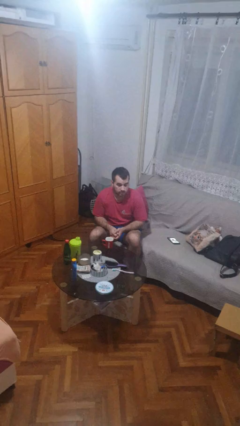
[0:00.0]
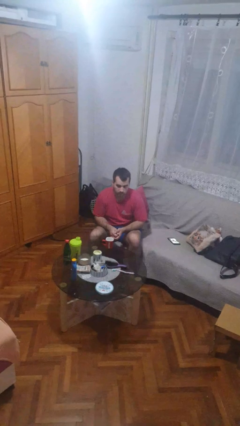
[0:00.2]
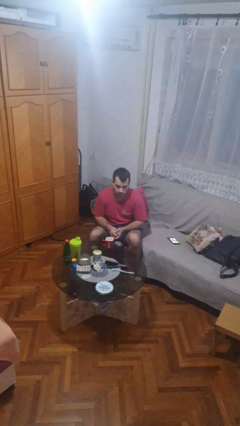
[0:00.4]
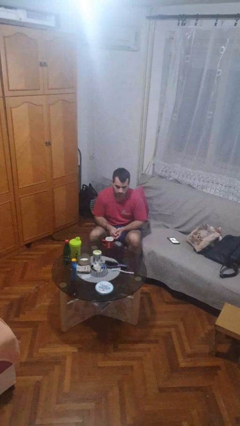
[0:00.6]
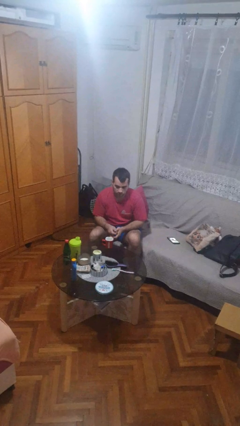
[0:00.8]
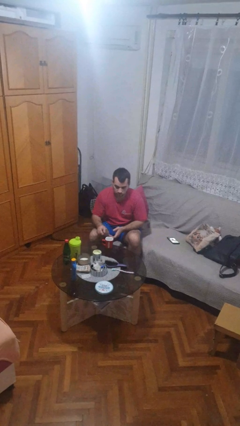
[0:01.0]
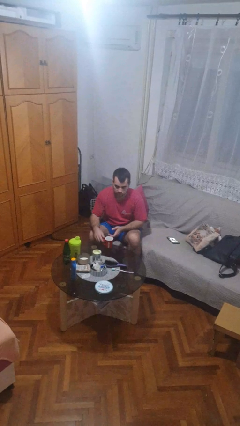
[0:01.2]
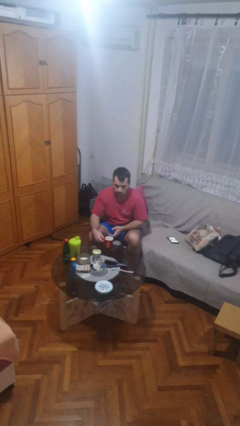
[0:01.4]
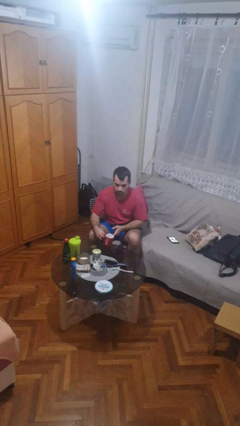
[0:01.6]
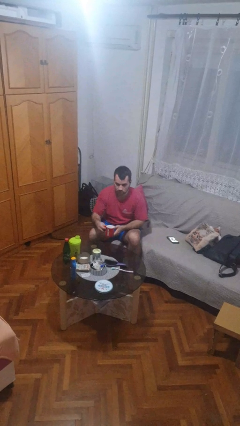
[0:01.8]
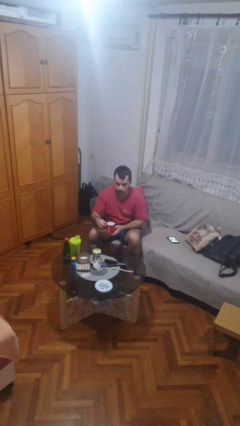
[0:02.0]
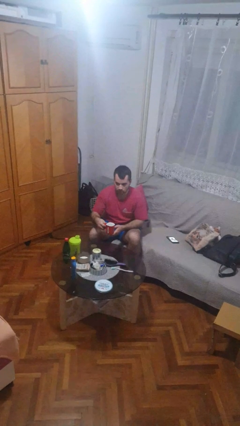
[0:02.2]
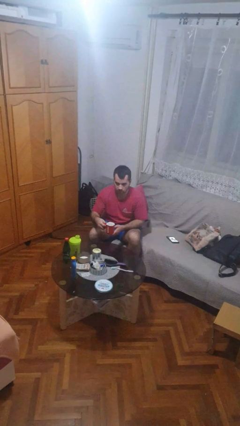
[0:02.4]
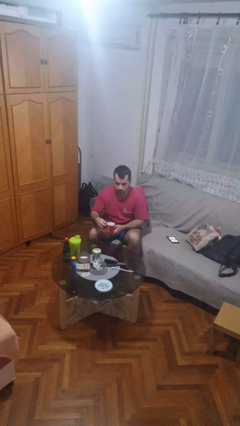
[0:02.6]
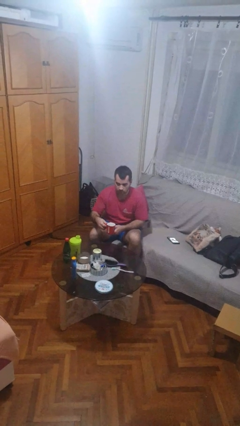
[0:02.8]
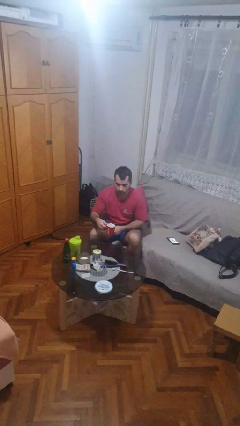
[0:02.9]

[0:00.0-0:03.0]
person picks up object from table

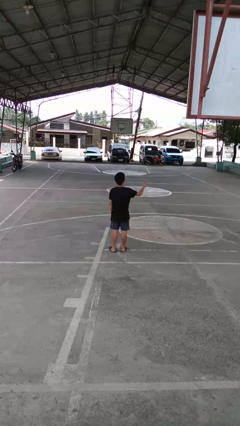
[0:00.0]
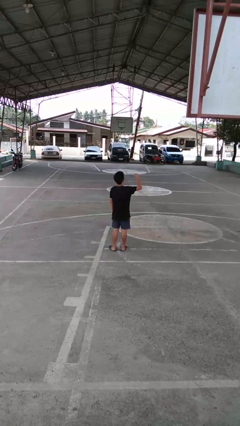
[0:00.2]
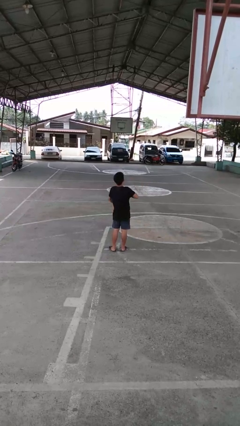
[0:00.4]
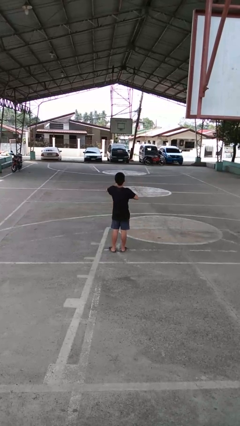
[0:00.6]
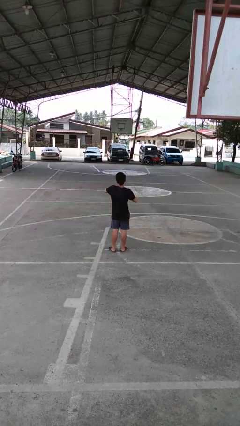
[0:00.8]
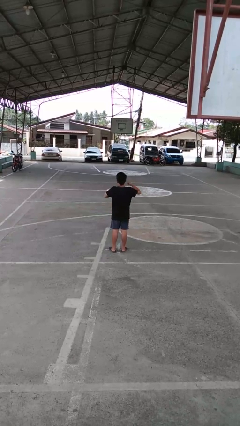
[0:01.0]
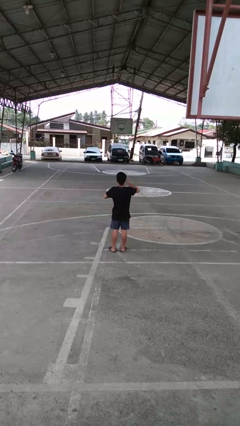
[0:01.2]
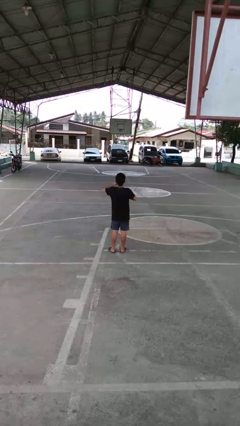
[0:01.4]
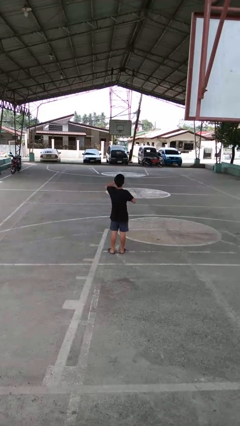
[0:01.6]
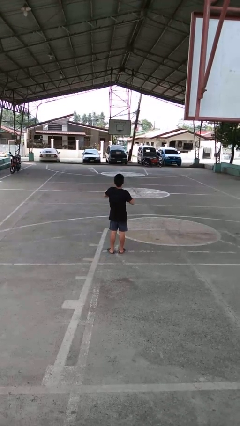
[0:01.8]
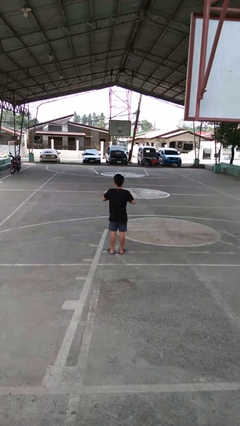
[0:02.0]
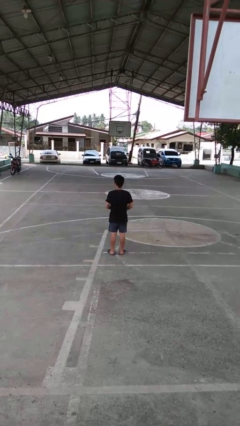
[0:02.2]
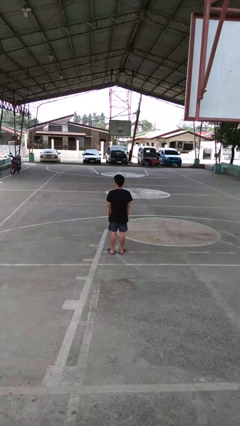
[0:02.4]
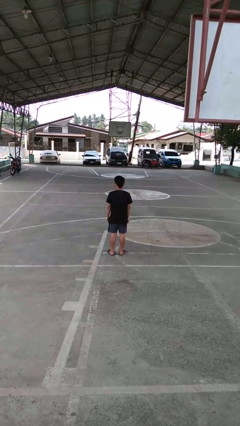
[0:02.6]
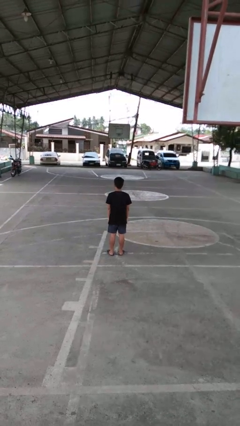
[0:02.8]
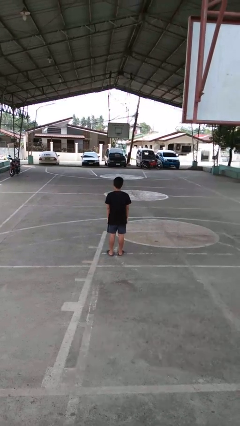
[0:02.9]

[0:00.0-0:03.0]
person drums on chest

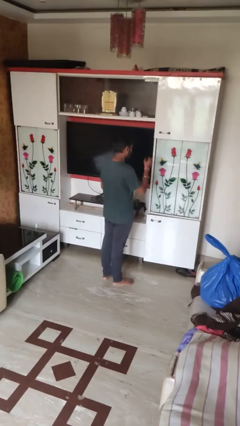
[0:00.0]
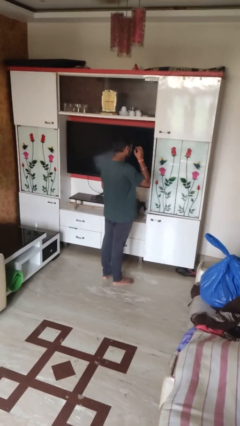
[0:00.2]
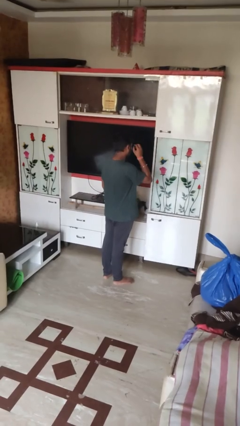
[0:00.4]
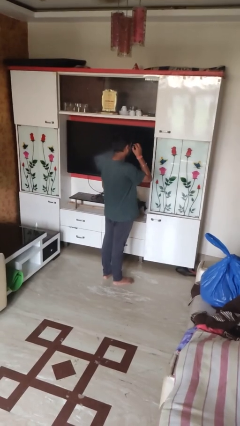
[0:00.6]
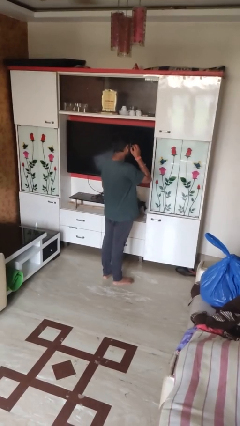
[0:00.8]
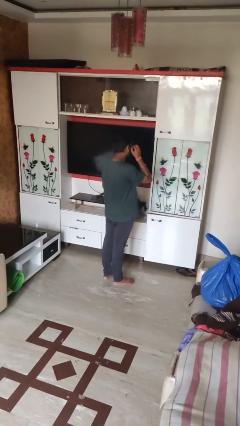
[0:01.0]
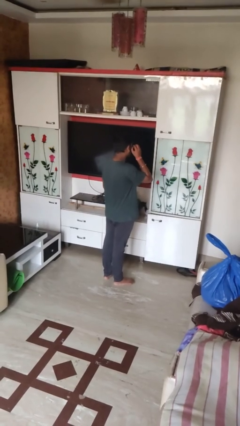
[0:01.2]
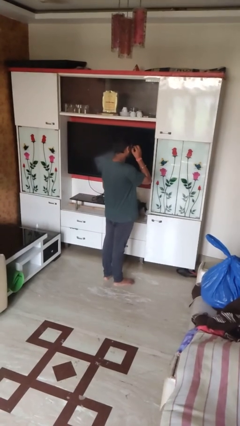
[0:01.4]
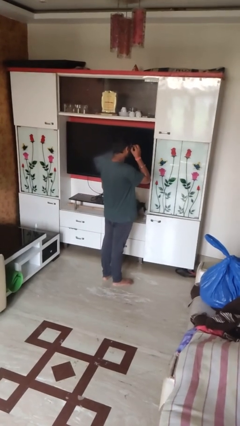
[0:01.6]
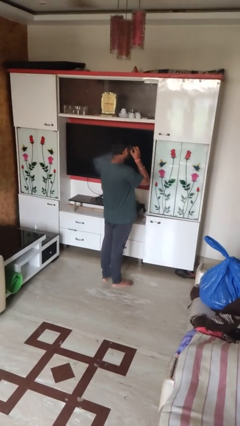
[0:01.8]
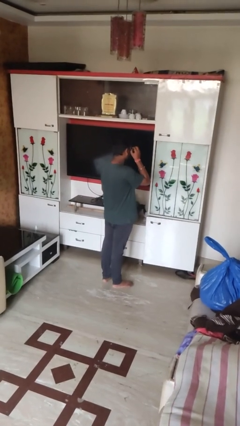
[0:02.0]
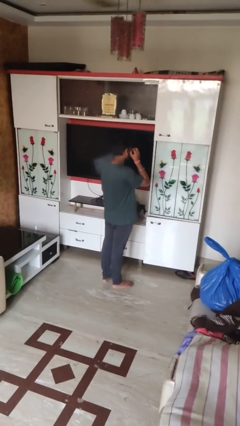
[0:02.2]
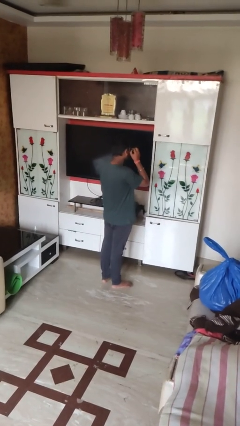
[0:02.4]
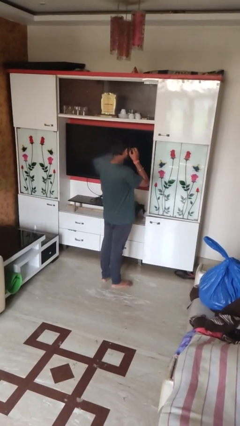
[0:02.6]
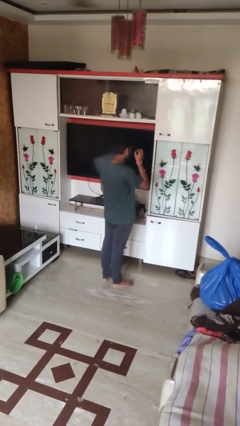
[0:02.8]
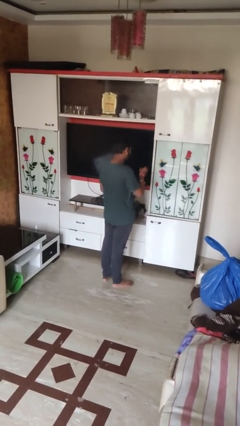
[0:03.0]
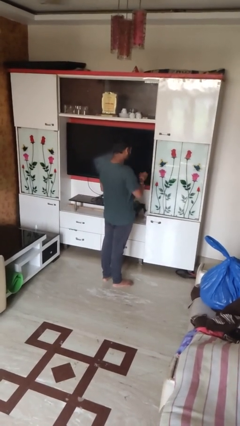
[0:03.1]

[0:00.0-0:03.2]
person applies eye makeup

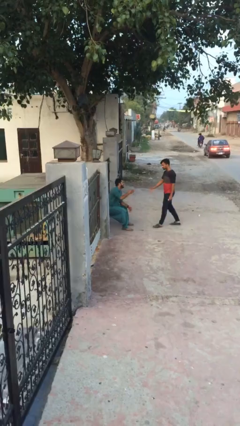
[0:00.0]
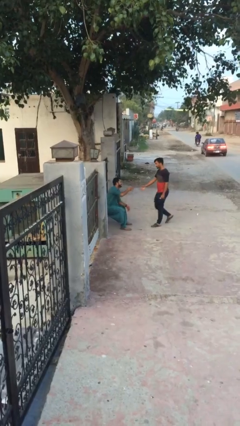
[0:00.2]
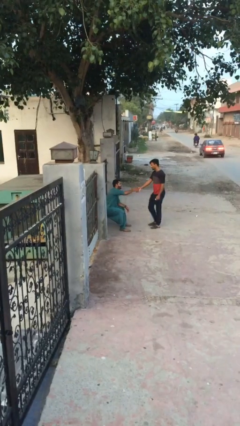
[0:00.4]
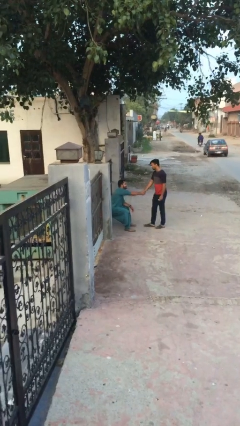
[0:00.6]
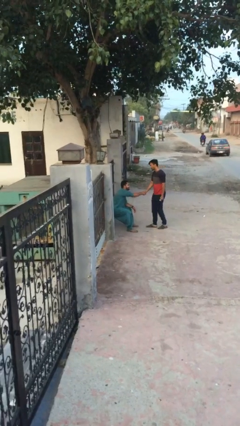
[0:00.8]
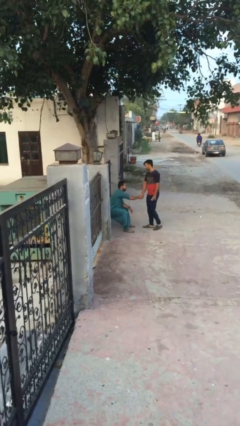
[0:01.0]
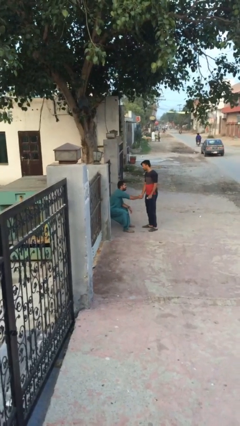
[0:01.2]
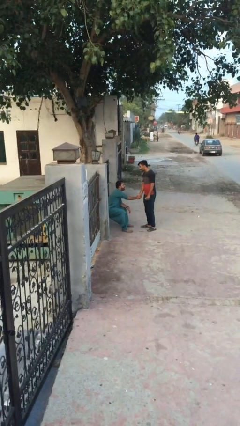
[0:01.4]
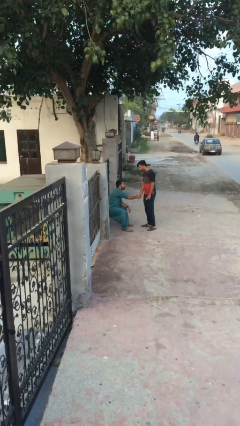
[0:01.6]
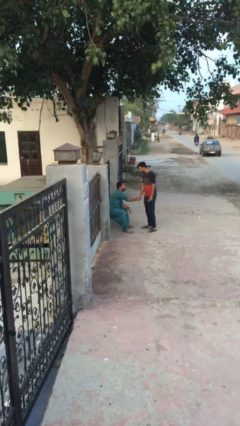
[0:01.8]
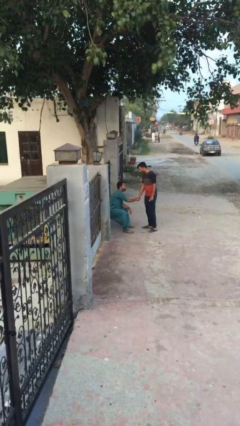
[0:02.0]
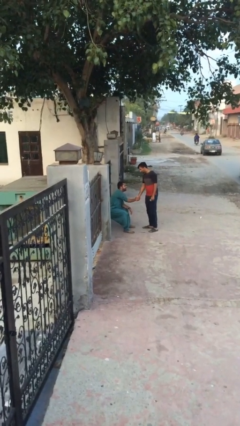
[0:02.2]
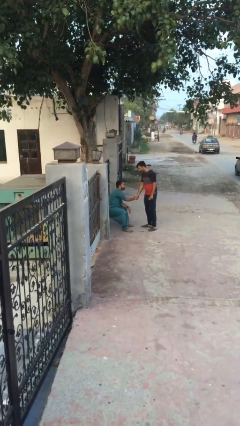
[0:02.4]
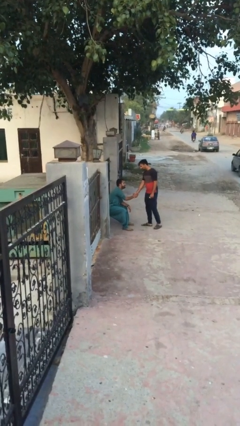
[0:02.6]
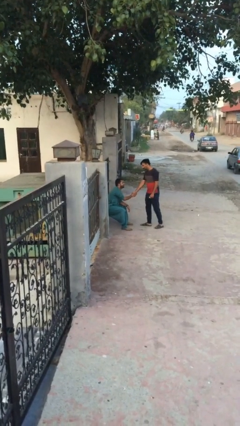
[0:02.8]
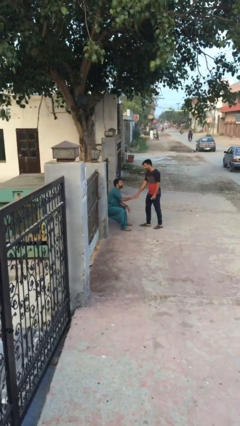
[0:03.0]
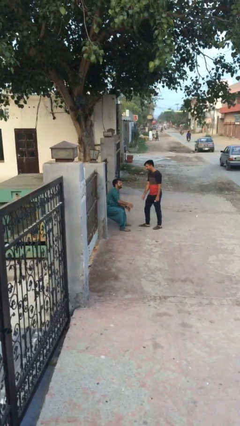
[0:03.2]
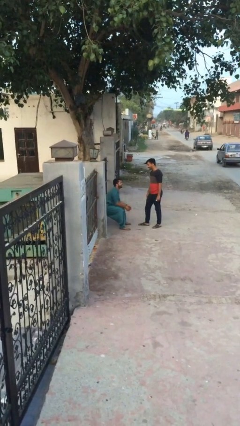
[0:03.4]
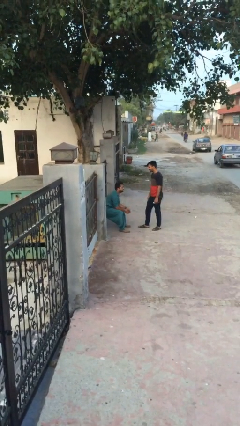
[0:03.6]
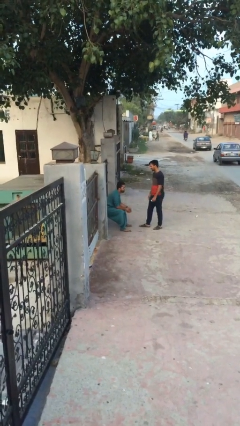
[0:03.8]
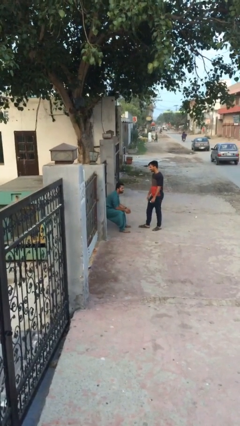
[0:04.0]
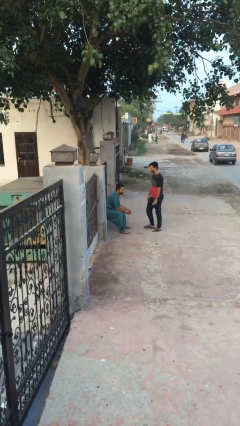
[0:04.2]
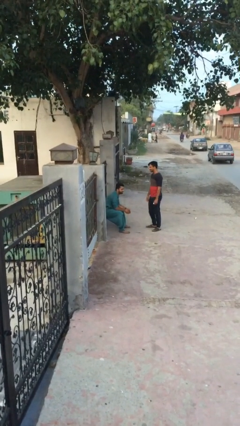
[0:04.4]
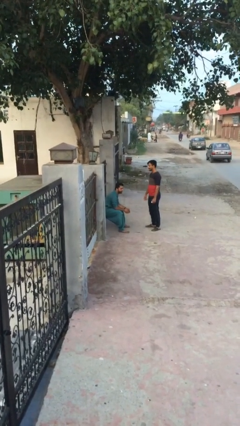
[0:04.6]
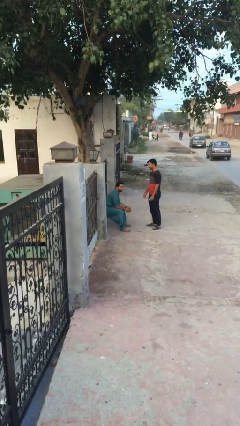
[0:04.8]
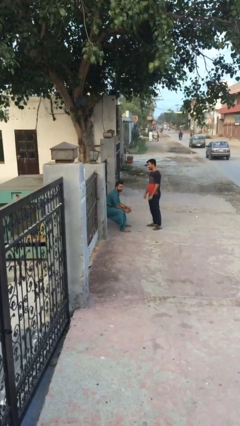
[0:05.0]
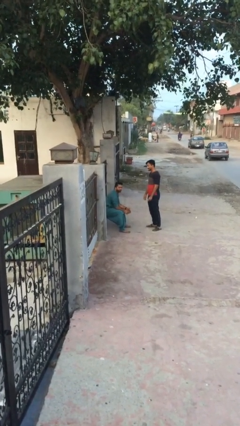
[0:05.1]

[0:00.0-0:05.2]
person shakes hand

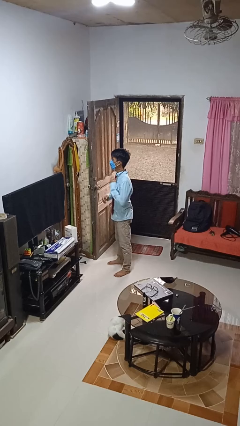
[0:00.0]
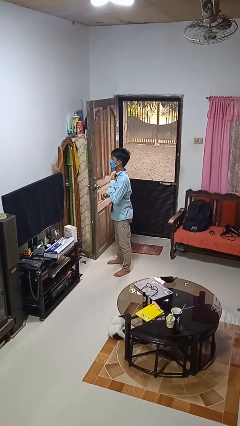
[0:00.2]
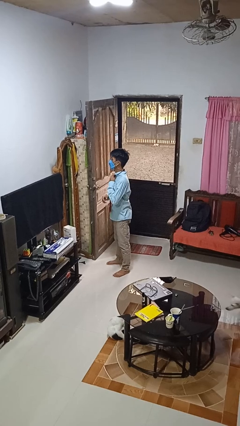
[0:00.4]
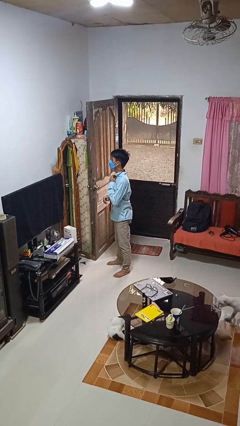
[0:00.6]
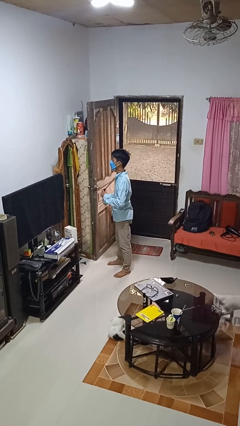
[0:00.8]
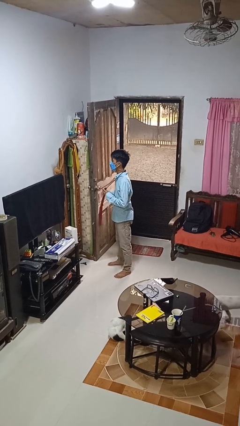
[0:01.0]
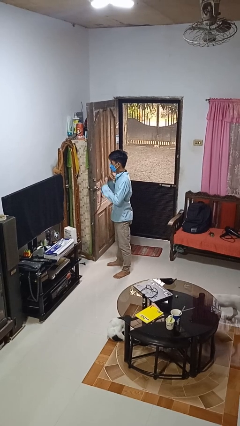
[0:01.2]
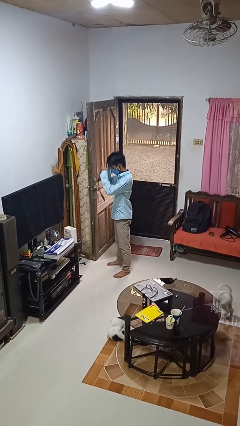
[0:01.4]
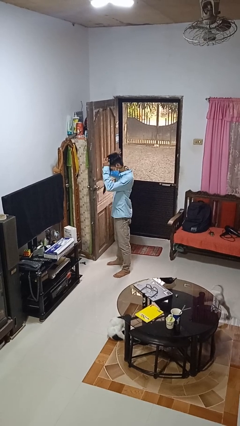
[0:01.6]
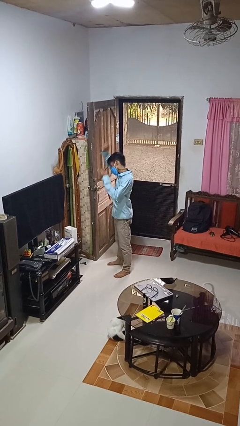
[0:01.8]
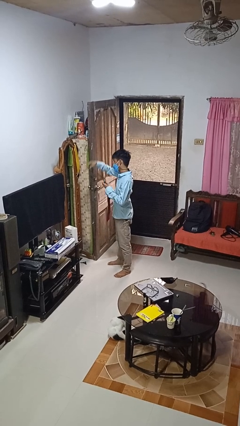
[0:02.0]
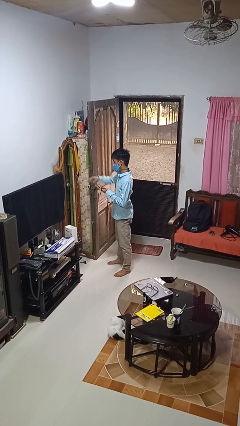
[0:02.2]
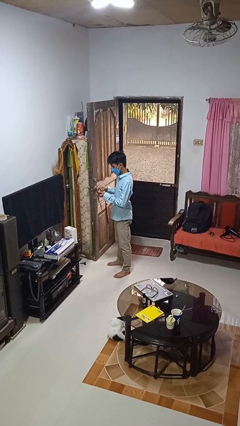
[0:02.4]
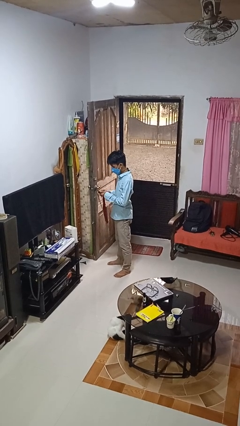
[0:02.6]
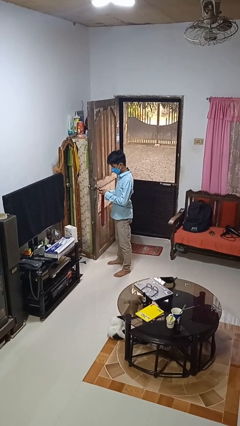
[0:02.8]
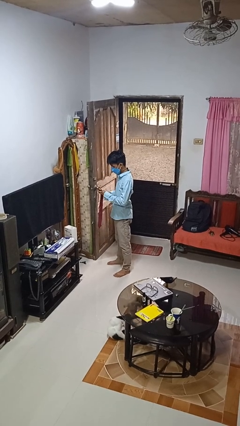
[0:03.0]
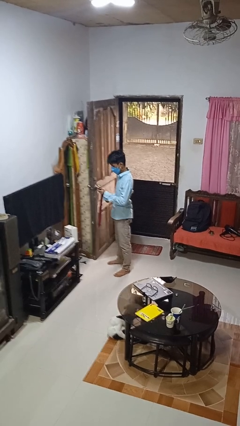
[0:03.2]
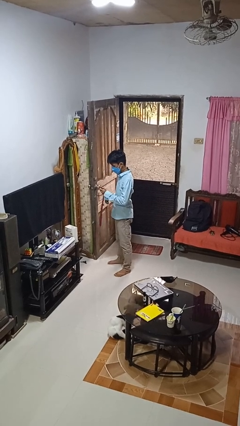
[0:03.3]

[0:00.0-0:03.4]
person takes off necktie

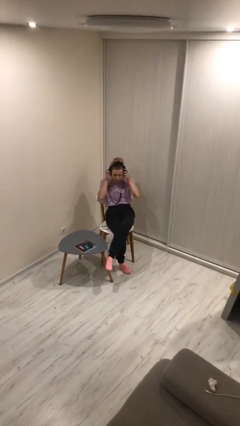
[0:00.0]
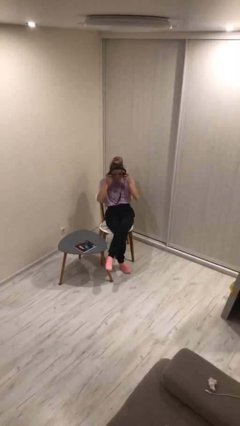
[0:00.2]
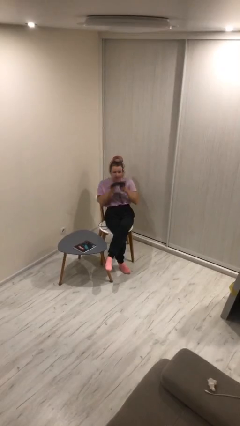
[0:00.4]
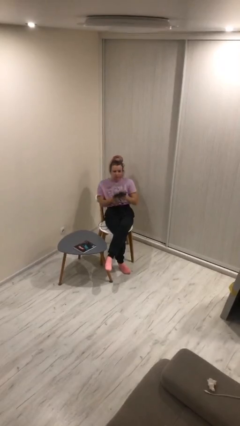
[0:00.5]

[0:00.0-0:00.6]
person takes off headphones
